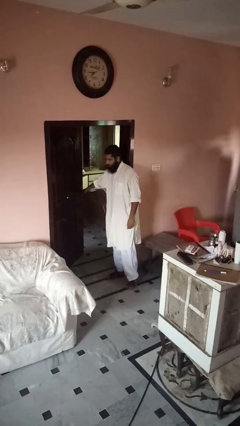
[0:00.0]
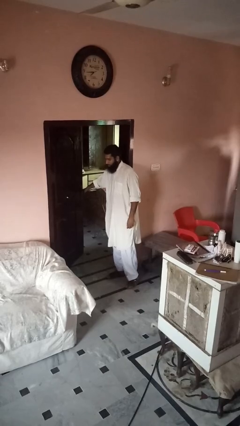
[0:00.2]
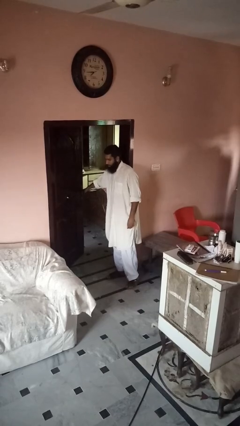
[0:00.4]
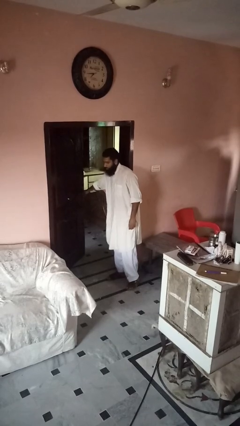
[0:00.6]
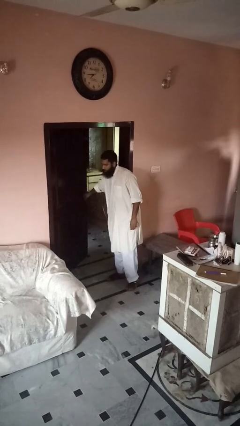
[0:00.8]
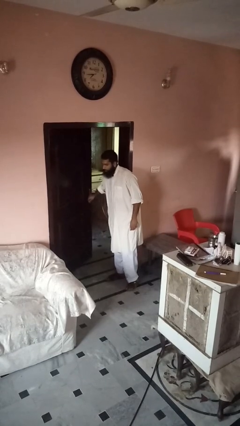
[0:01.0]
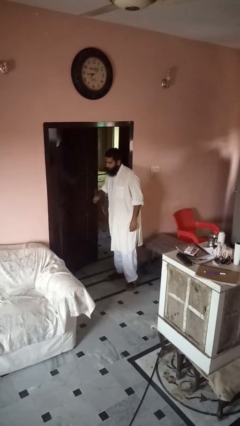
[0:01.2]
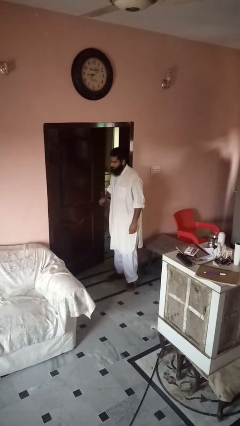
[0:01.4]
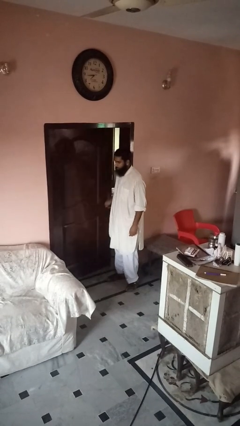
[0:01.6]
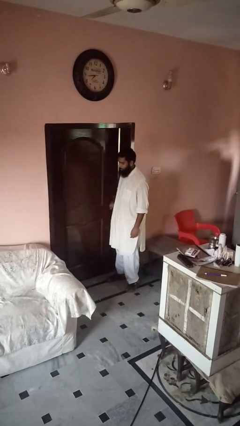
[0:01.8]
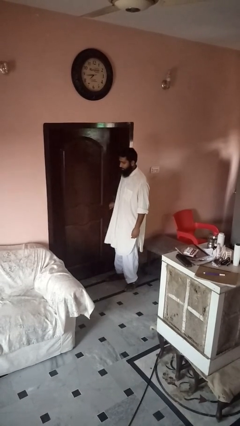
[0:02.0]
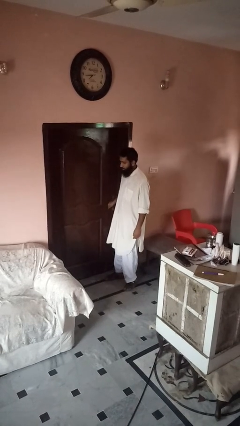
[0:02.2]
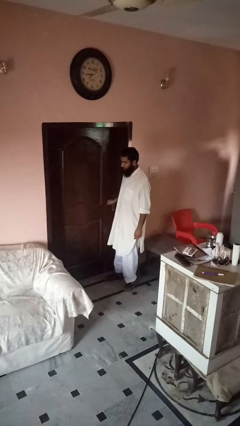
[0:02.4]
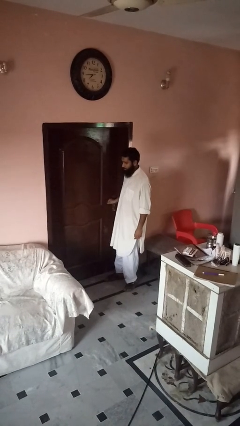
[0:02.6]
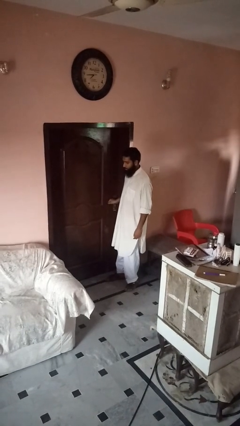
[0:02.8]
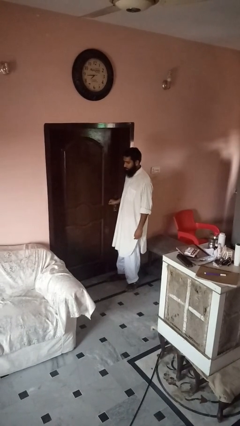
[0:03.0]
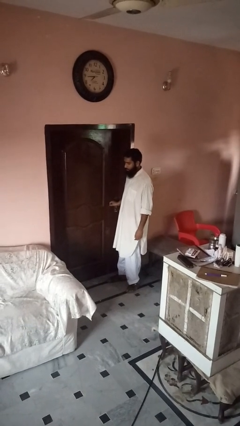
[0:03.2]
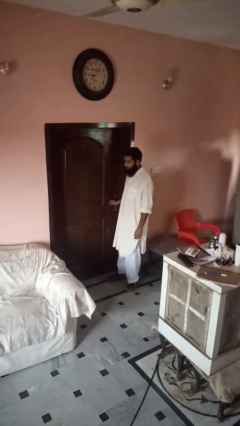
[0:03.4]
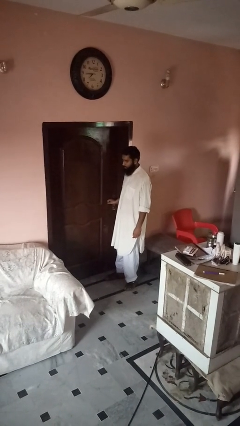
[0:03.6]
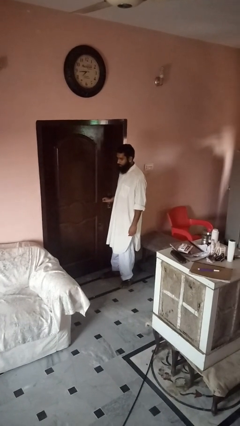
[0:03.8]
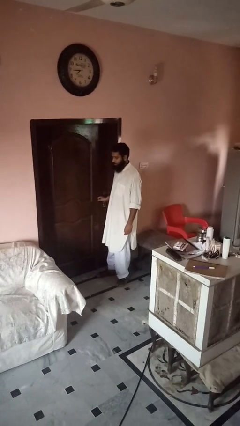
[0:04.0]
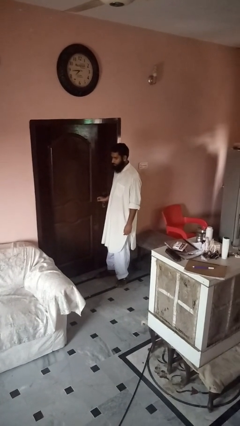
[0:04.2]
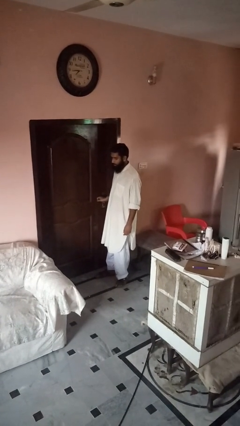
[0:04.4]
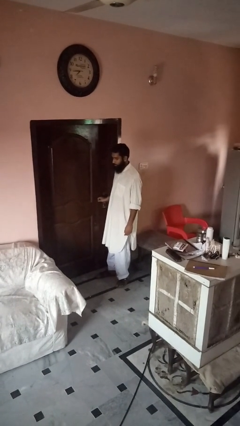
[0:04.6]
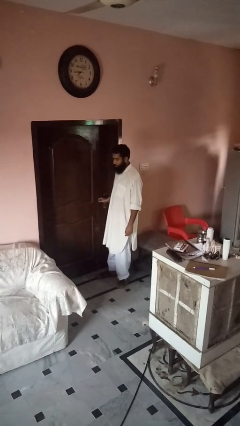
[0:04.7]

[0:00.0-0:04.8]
person closes gate

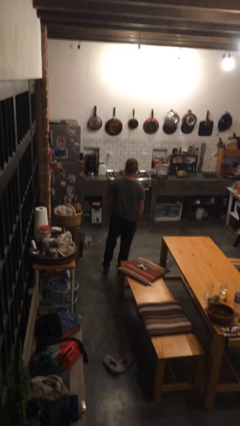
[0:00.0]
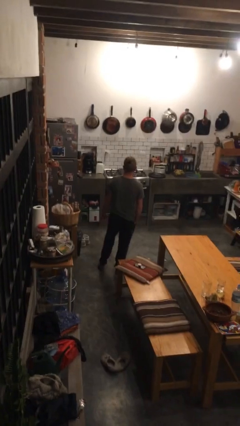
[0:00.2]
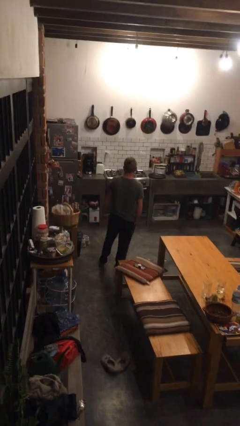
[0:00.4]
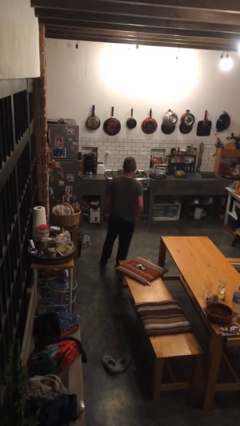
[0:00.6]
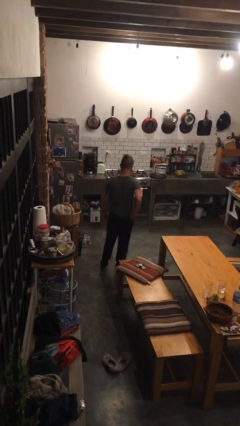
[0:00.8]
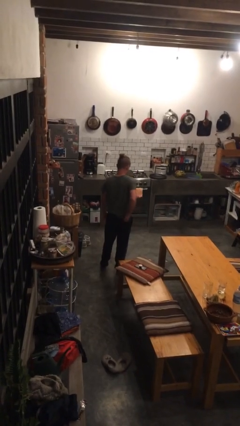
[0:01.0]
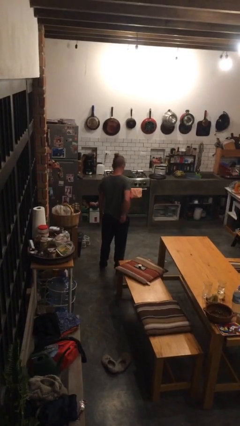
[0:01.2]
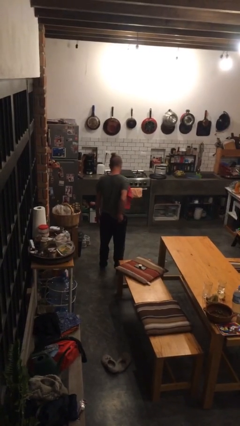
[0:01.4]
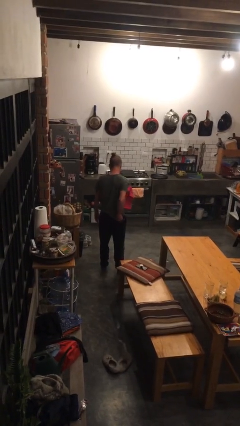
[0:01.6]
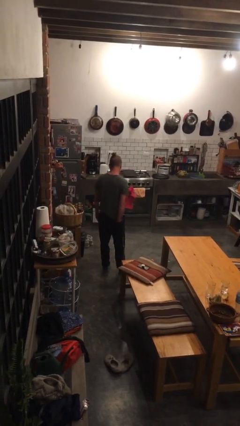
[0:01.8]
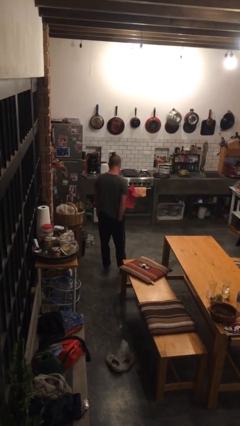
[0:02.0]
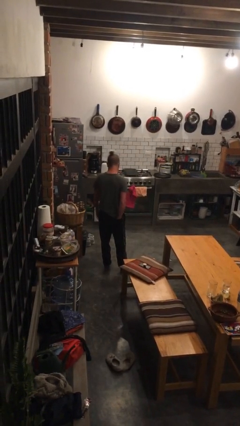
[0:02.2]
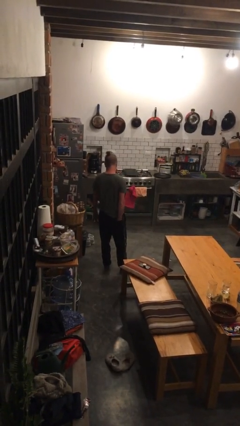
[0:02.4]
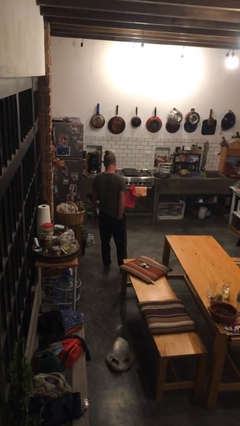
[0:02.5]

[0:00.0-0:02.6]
person puts hands in back pockets

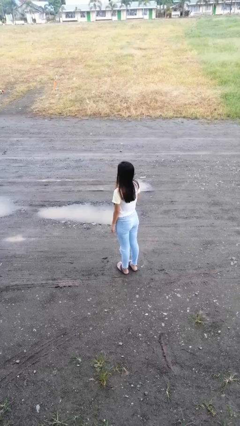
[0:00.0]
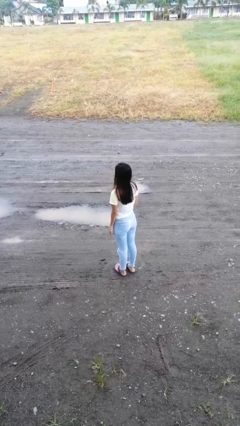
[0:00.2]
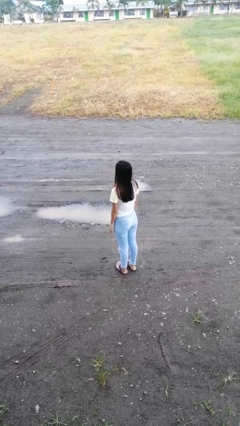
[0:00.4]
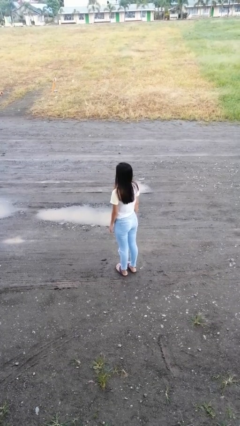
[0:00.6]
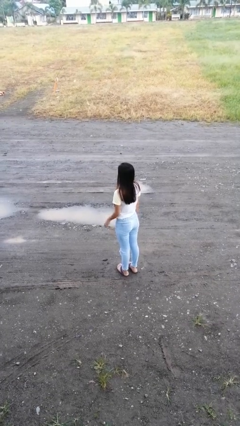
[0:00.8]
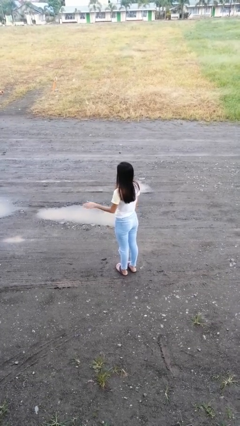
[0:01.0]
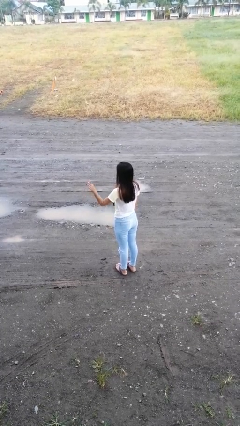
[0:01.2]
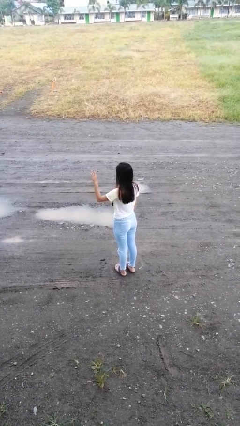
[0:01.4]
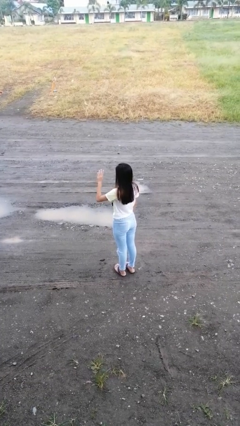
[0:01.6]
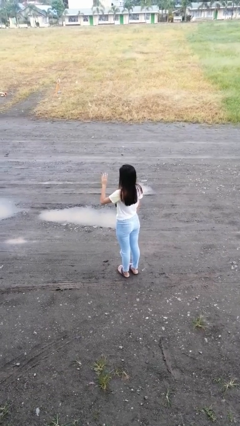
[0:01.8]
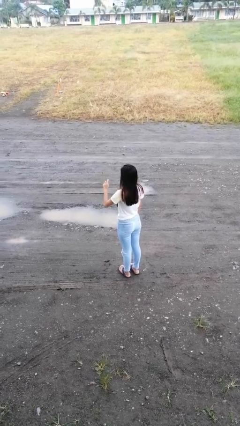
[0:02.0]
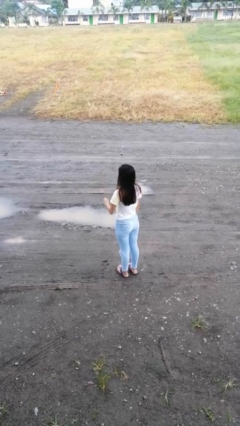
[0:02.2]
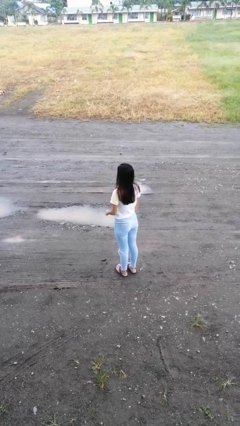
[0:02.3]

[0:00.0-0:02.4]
person gestures swipe left

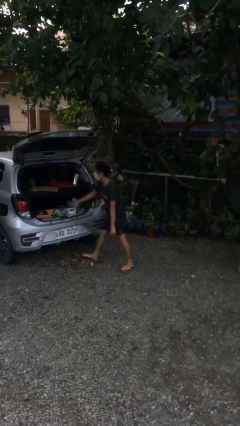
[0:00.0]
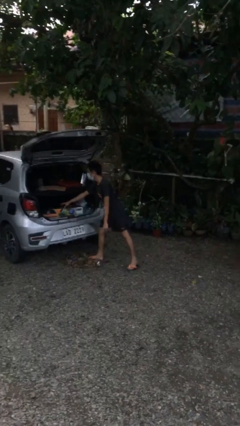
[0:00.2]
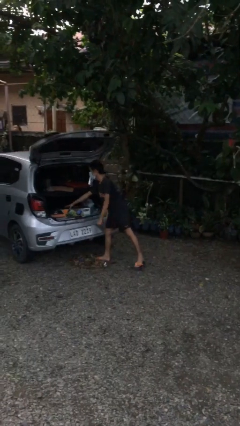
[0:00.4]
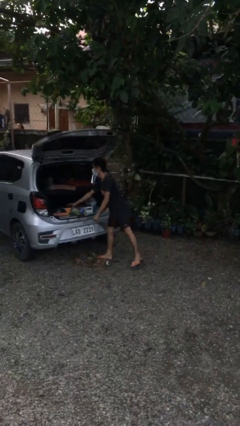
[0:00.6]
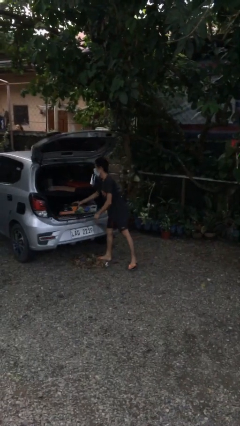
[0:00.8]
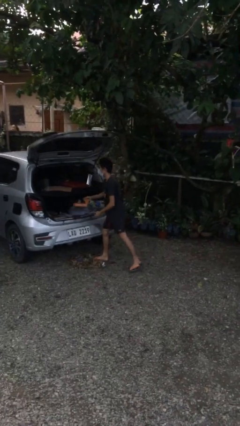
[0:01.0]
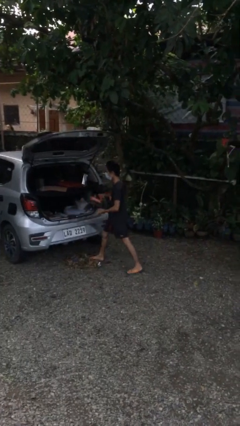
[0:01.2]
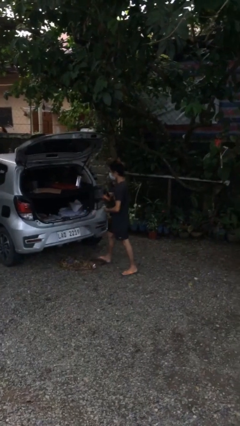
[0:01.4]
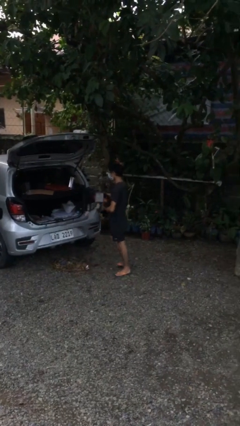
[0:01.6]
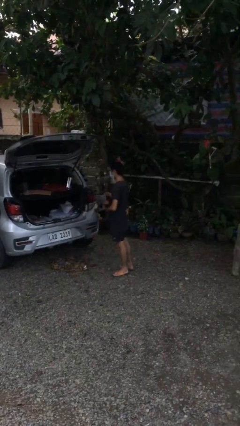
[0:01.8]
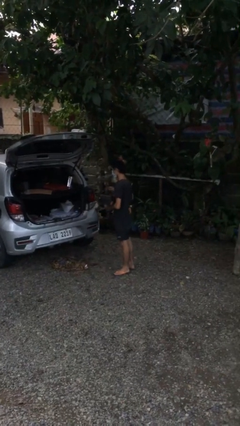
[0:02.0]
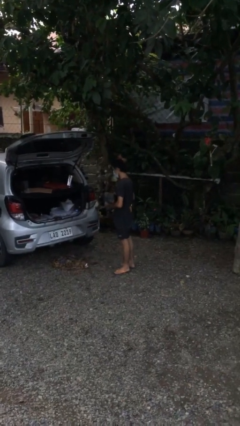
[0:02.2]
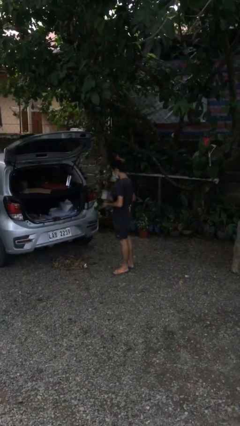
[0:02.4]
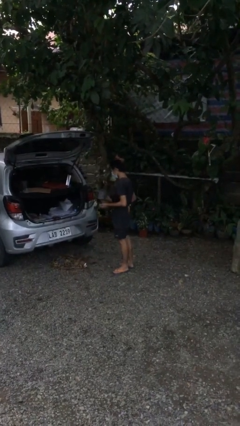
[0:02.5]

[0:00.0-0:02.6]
person unloads car

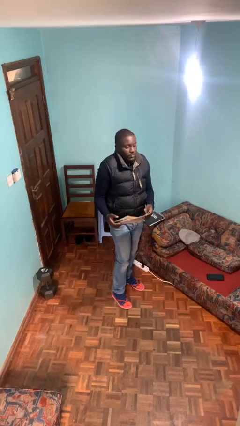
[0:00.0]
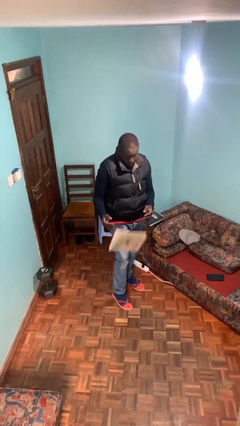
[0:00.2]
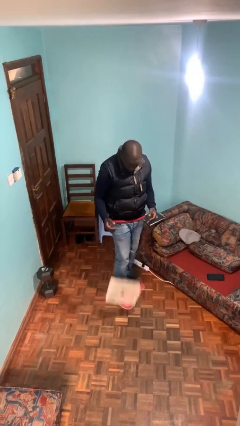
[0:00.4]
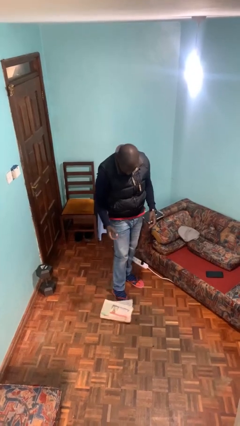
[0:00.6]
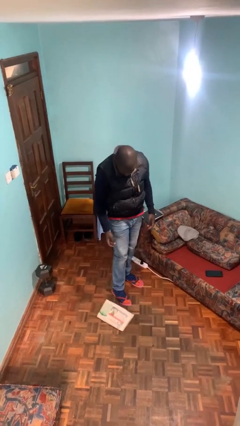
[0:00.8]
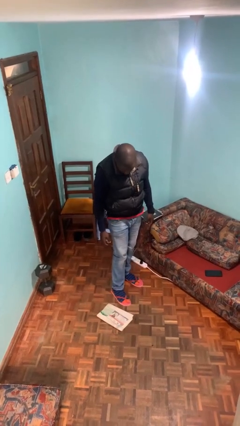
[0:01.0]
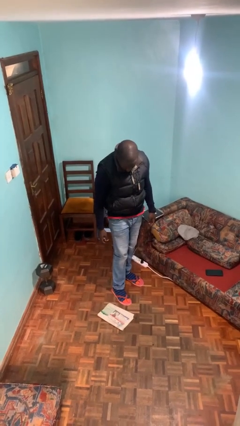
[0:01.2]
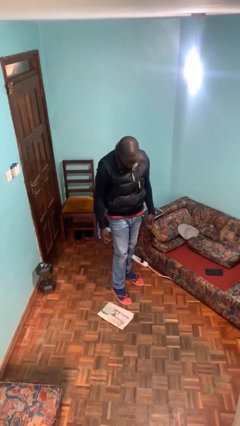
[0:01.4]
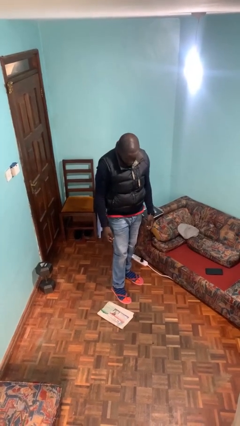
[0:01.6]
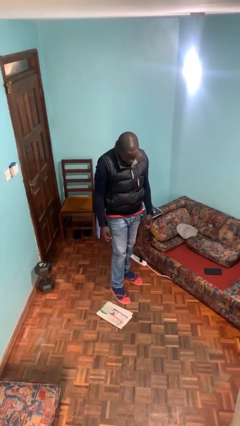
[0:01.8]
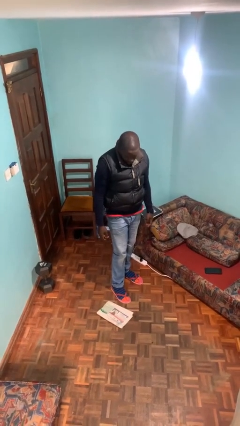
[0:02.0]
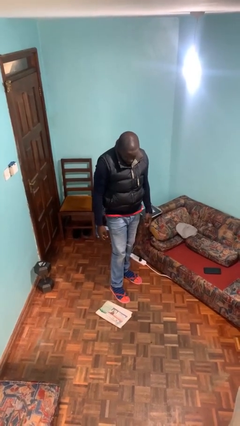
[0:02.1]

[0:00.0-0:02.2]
person drops object

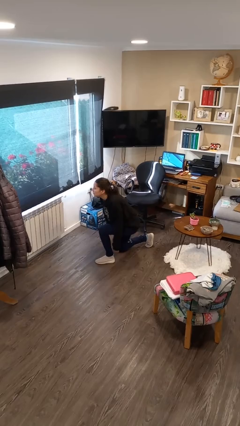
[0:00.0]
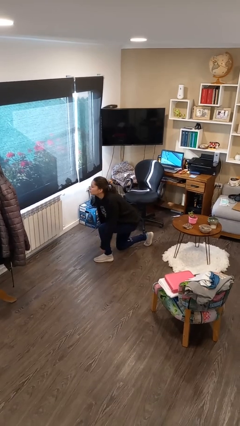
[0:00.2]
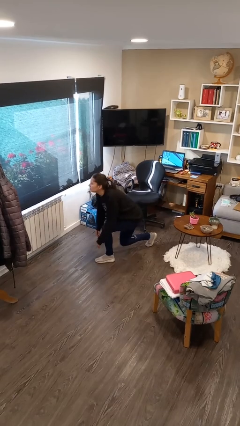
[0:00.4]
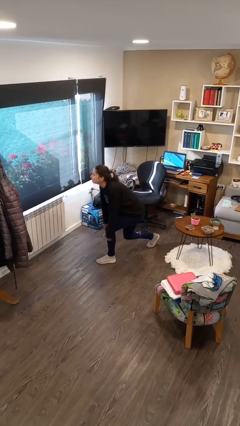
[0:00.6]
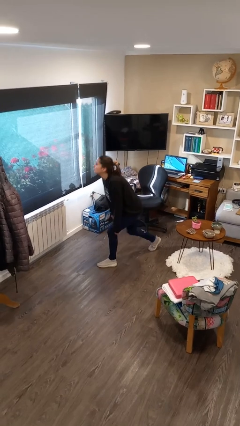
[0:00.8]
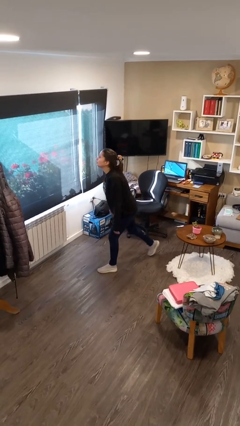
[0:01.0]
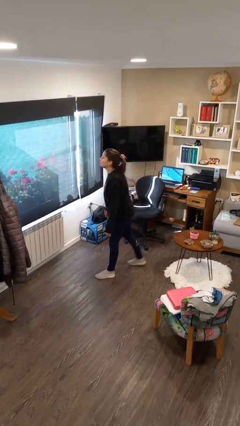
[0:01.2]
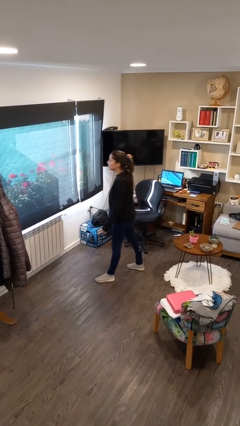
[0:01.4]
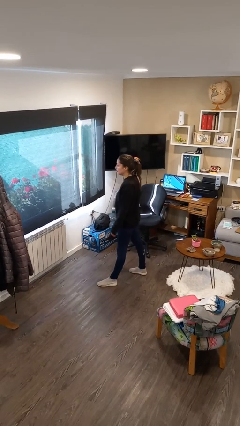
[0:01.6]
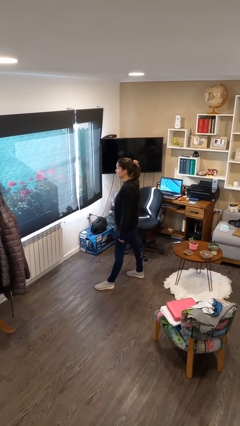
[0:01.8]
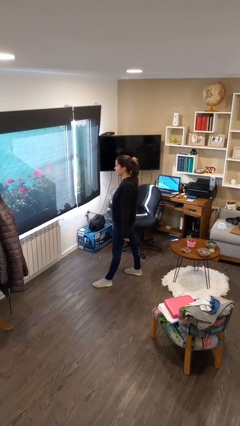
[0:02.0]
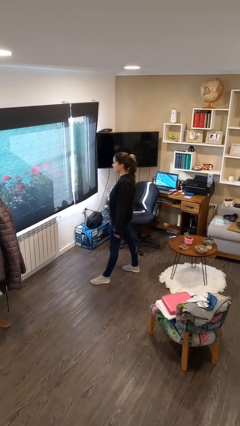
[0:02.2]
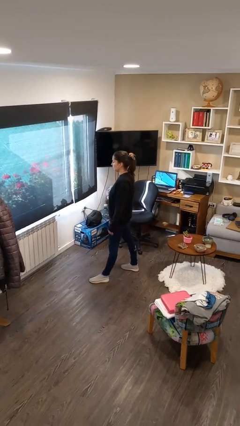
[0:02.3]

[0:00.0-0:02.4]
person stands up from floor
